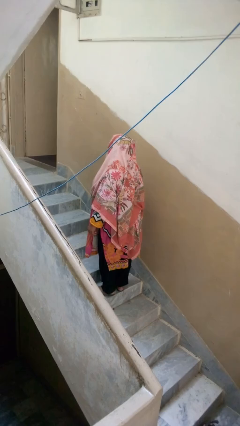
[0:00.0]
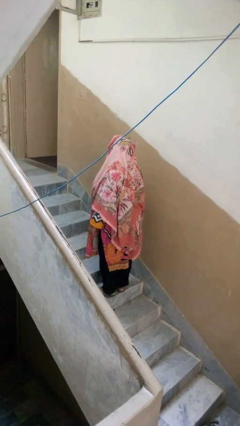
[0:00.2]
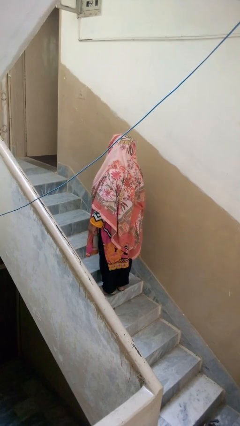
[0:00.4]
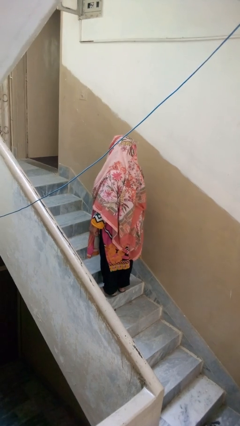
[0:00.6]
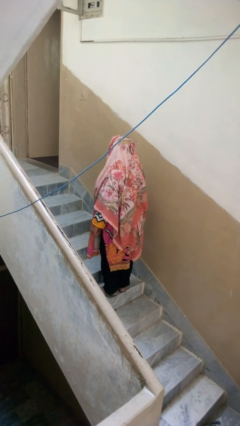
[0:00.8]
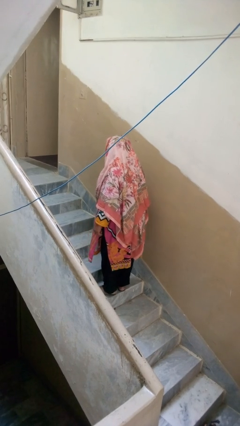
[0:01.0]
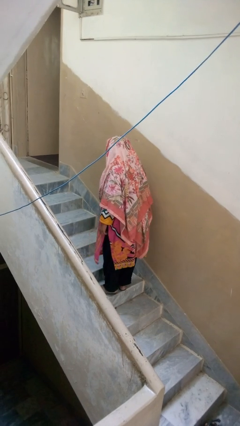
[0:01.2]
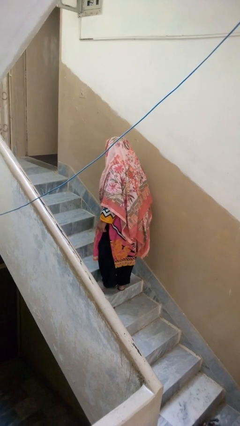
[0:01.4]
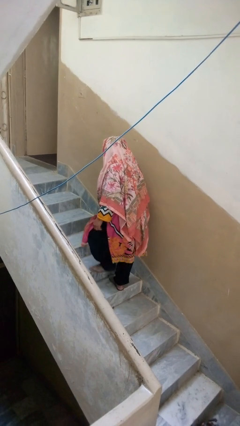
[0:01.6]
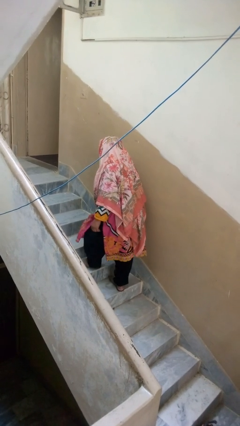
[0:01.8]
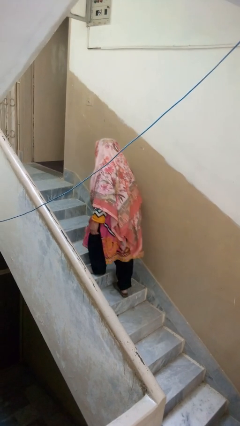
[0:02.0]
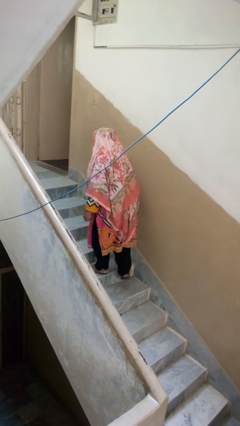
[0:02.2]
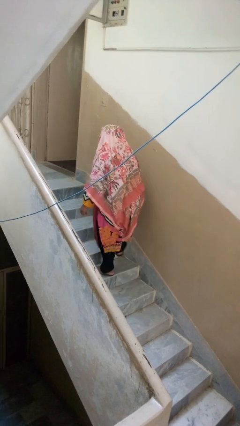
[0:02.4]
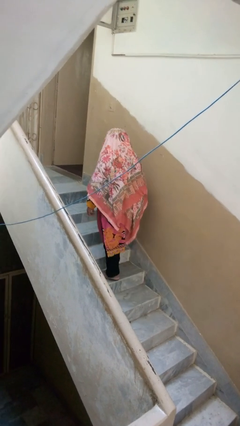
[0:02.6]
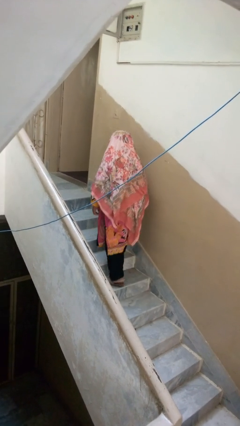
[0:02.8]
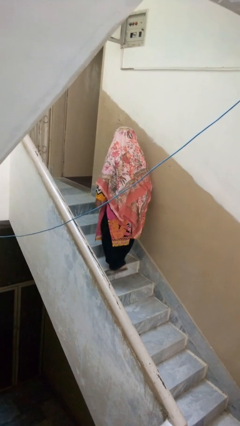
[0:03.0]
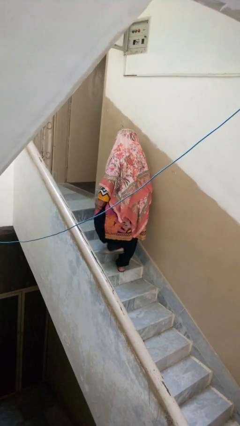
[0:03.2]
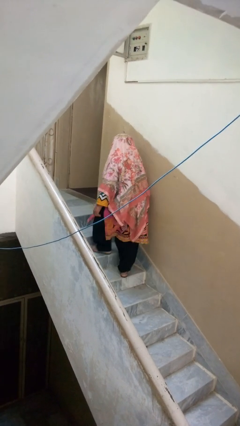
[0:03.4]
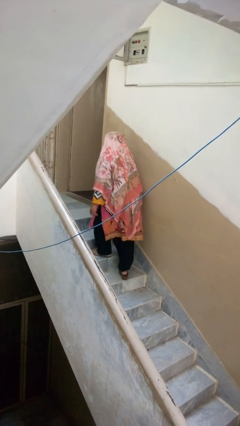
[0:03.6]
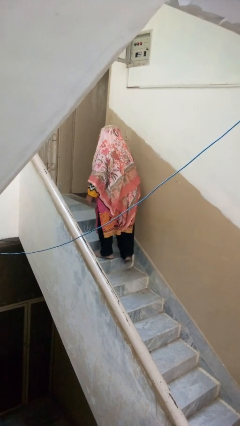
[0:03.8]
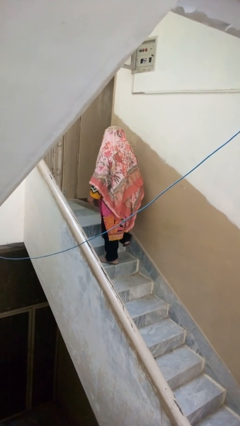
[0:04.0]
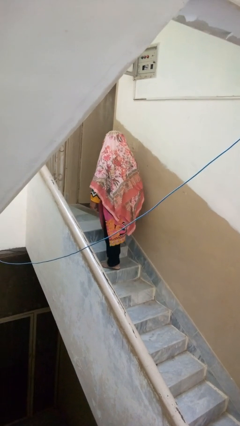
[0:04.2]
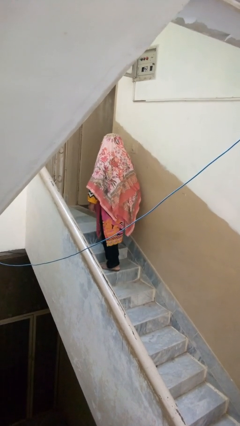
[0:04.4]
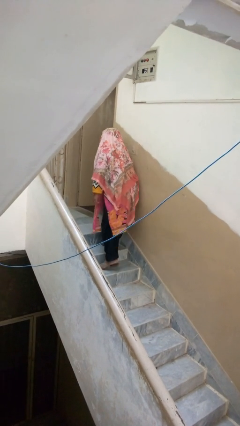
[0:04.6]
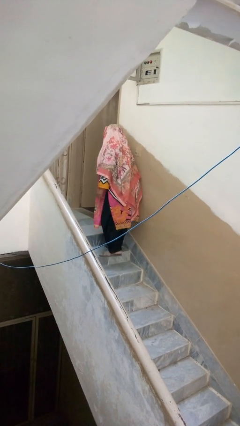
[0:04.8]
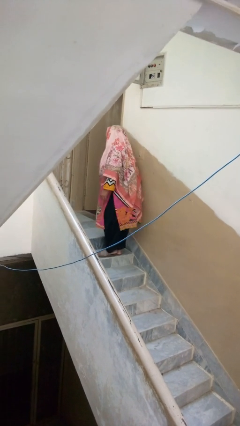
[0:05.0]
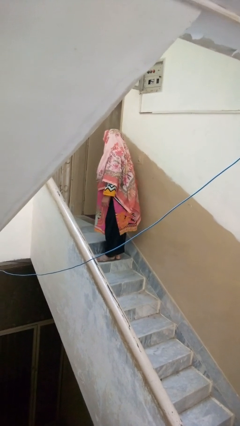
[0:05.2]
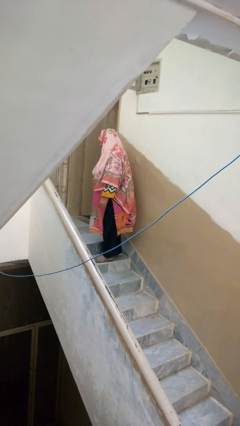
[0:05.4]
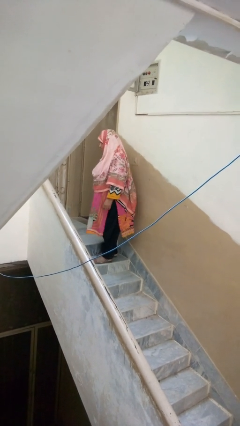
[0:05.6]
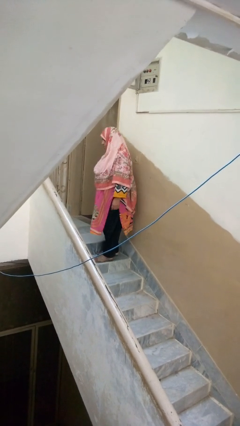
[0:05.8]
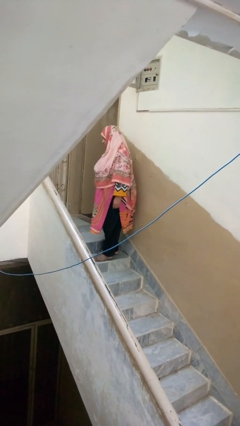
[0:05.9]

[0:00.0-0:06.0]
person climbs up stairs

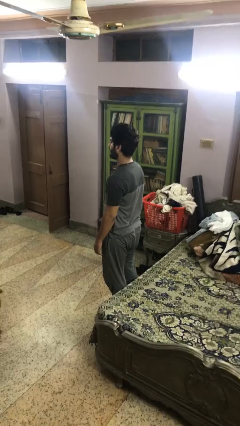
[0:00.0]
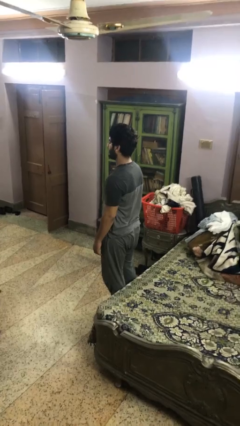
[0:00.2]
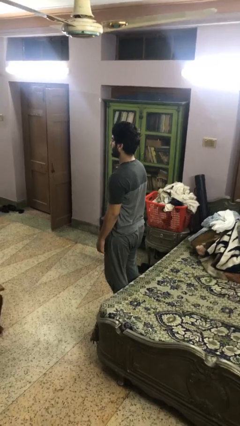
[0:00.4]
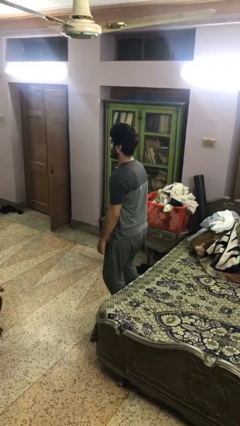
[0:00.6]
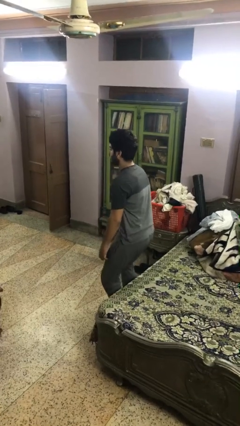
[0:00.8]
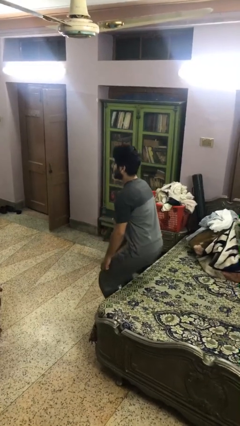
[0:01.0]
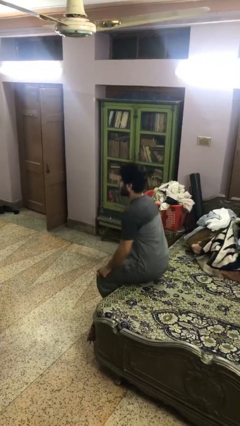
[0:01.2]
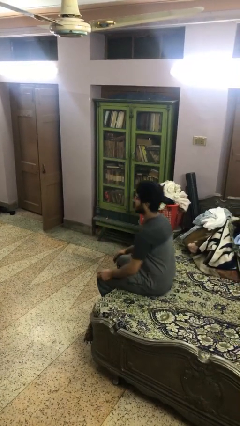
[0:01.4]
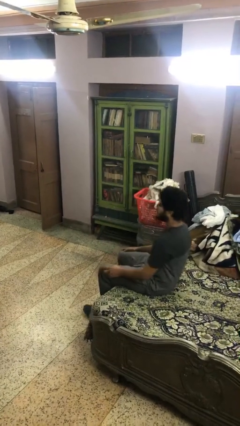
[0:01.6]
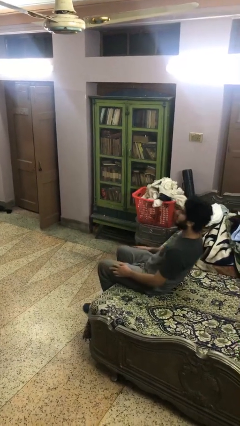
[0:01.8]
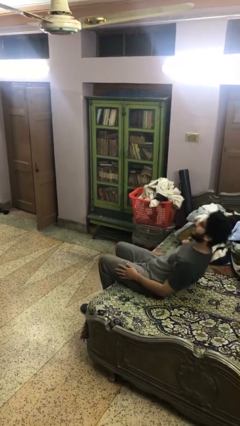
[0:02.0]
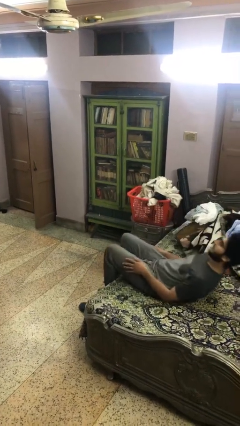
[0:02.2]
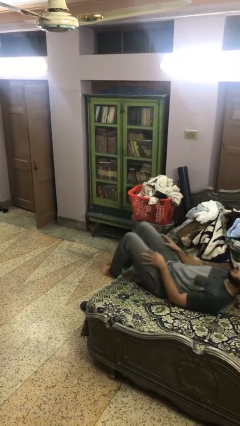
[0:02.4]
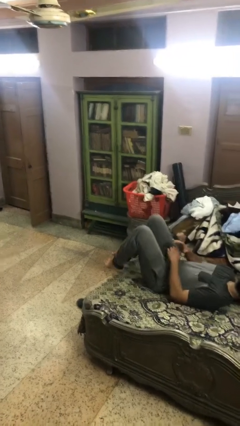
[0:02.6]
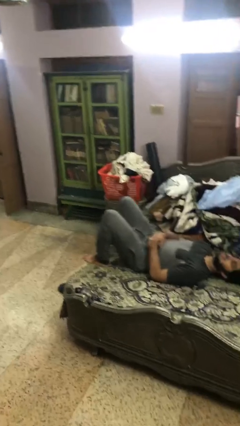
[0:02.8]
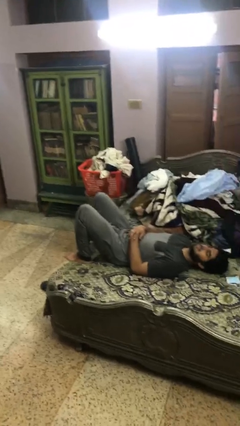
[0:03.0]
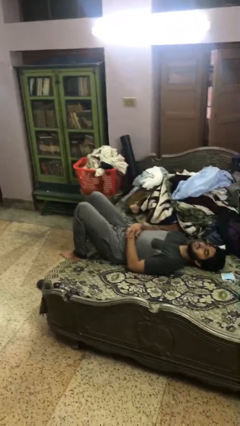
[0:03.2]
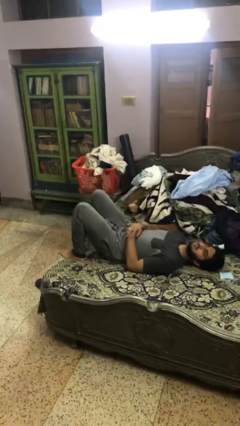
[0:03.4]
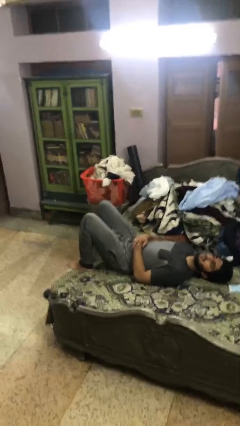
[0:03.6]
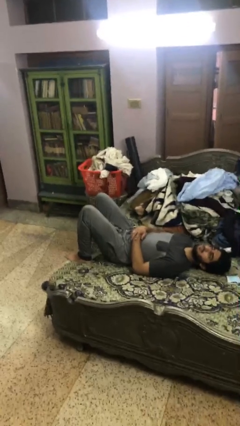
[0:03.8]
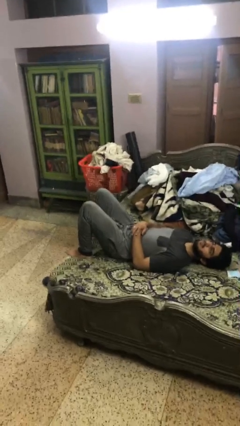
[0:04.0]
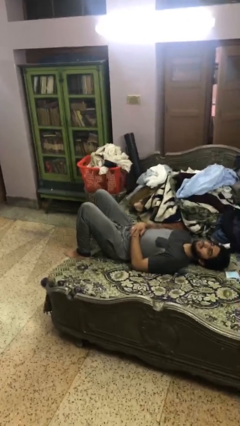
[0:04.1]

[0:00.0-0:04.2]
person lies down on bed

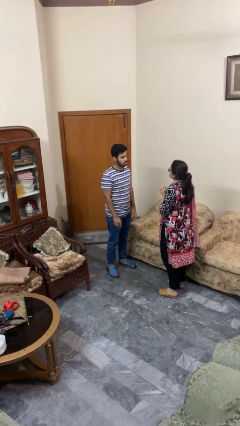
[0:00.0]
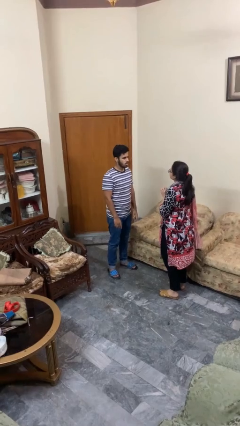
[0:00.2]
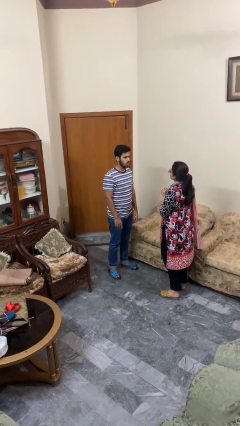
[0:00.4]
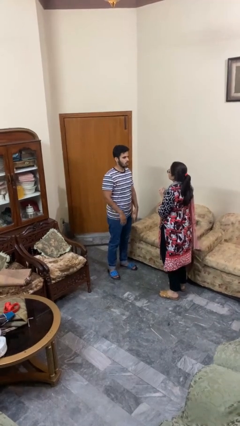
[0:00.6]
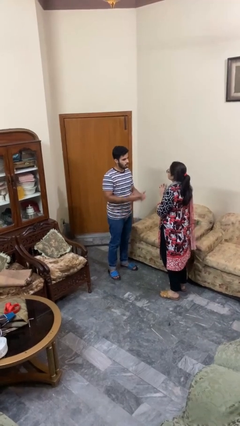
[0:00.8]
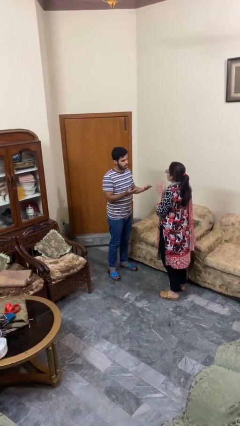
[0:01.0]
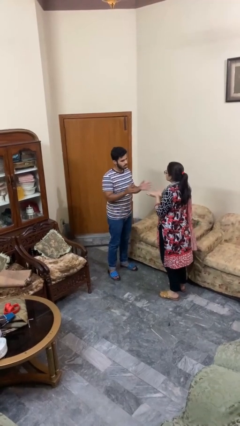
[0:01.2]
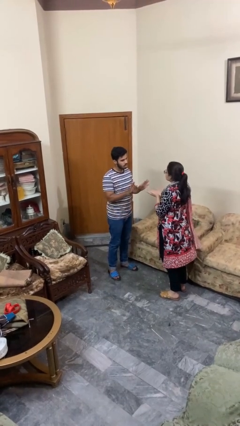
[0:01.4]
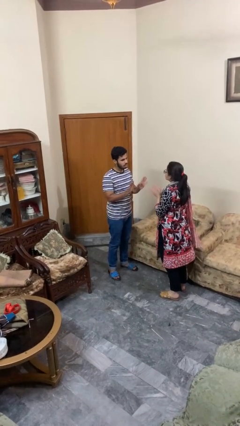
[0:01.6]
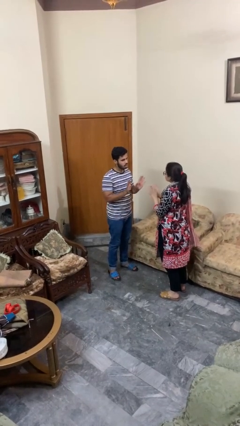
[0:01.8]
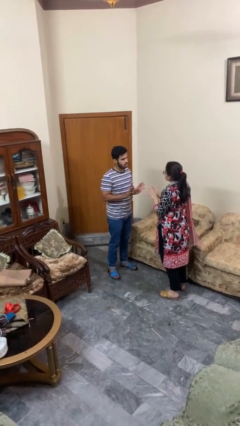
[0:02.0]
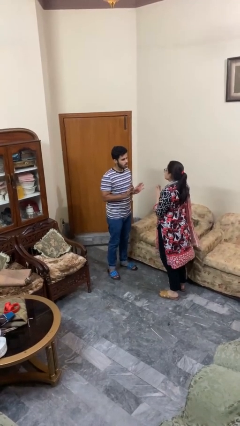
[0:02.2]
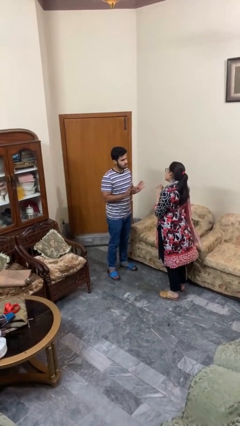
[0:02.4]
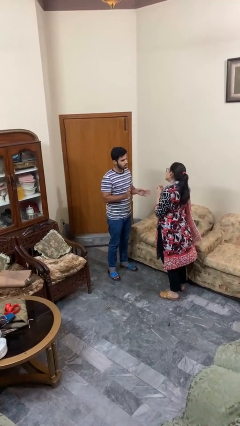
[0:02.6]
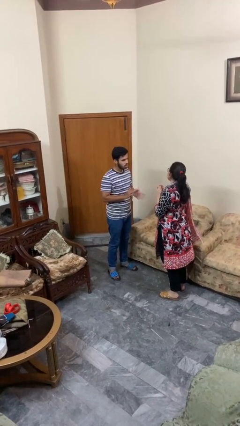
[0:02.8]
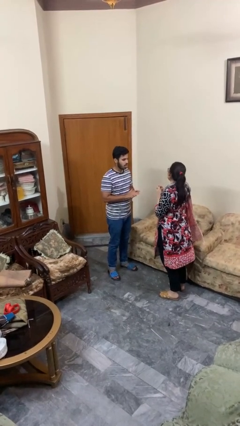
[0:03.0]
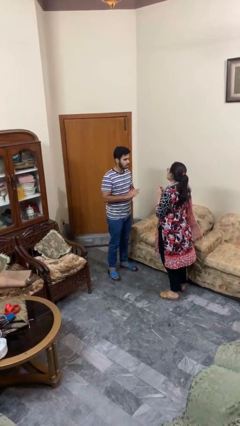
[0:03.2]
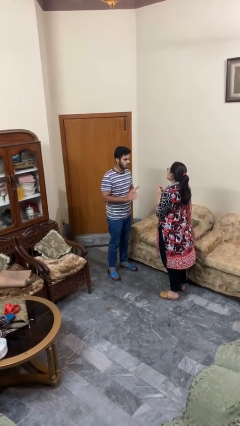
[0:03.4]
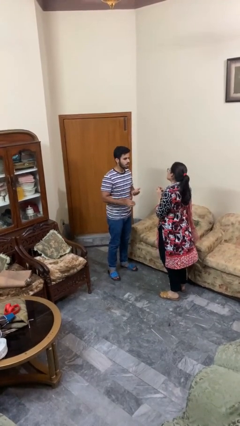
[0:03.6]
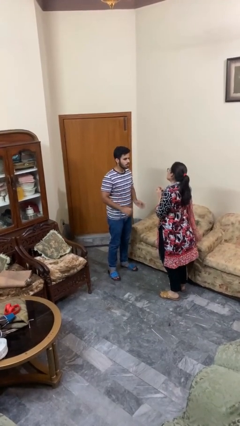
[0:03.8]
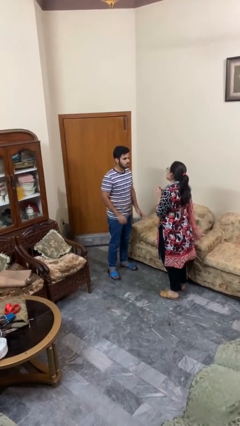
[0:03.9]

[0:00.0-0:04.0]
person talks to person

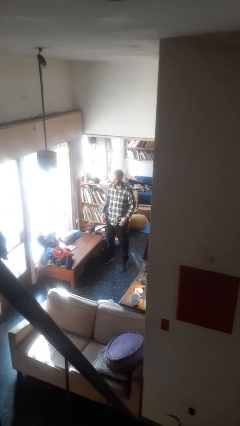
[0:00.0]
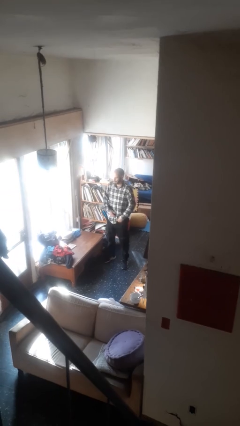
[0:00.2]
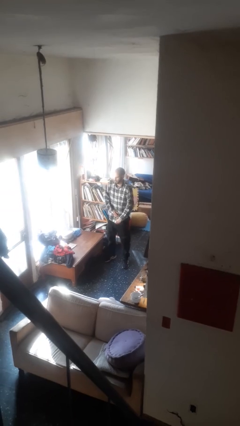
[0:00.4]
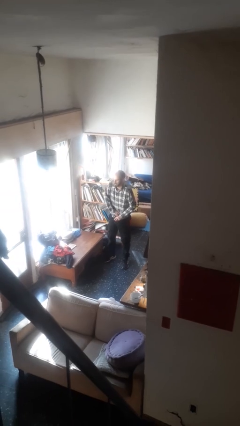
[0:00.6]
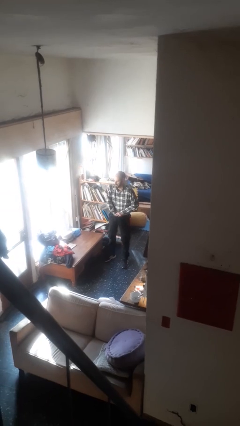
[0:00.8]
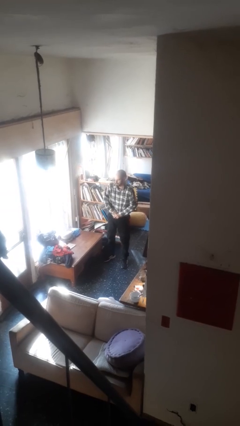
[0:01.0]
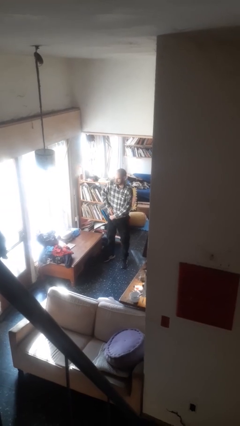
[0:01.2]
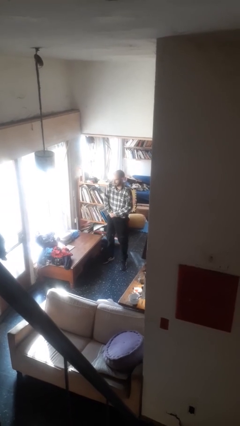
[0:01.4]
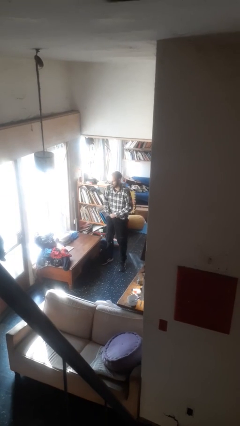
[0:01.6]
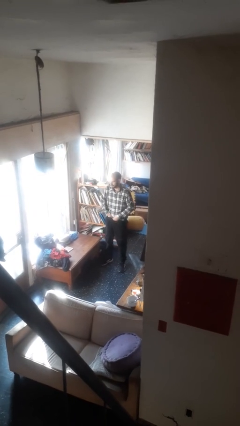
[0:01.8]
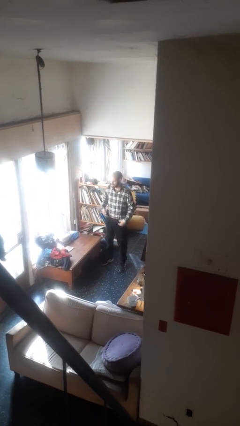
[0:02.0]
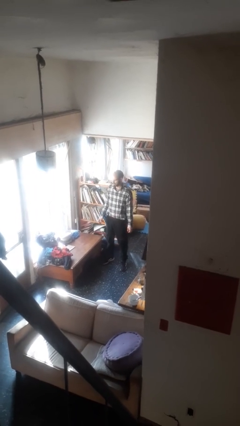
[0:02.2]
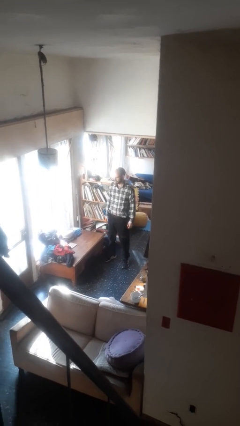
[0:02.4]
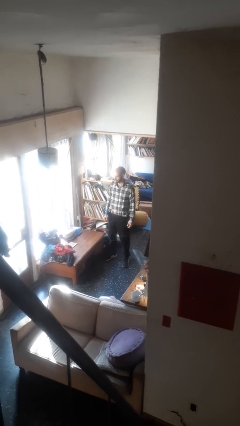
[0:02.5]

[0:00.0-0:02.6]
person tucks in shirt

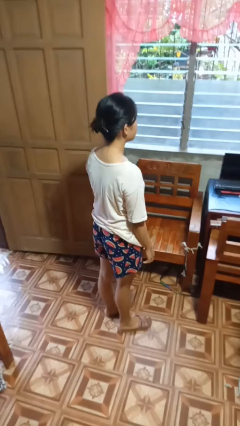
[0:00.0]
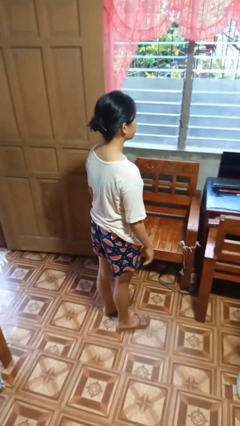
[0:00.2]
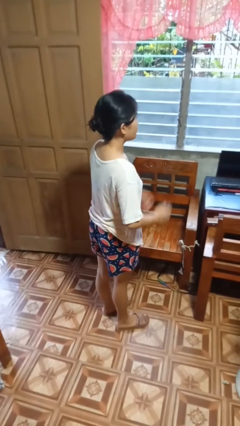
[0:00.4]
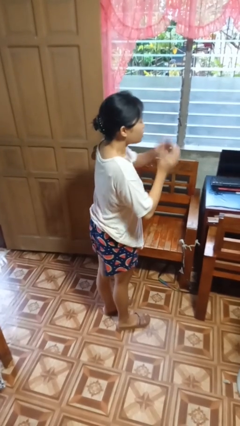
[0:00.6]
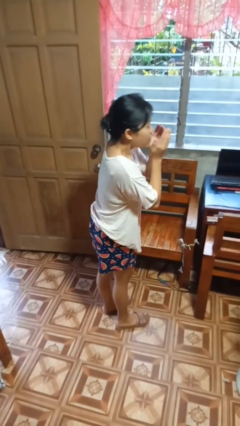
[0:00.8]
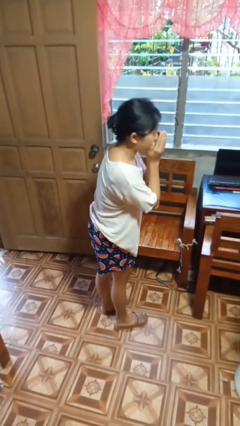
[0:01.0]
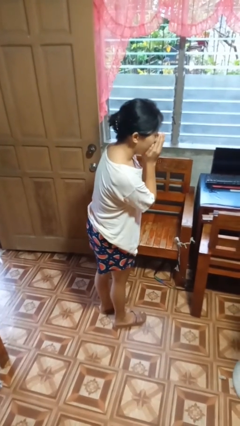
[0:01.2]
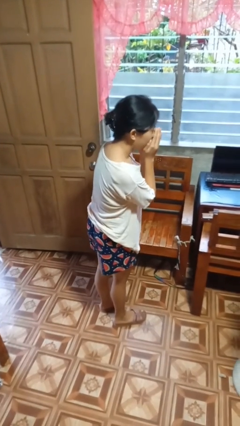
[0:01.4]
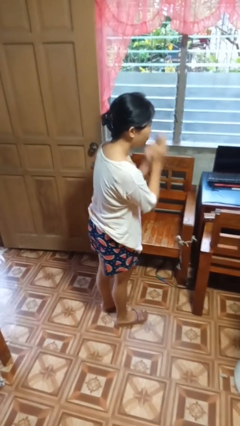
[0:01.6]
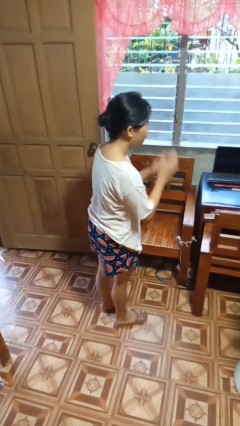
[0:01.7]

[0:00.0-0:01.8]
person sneezes into hand
